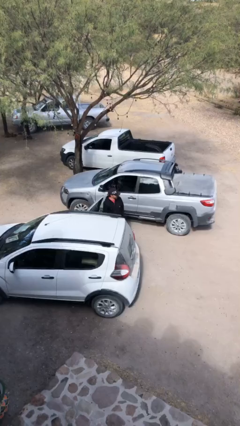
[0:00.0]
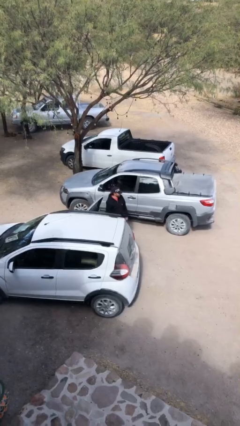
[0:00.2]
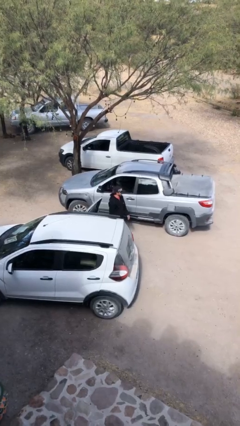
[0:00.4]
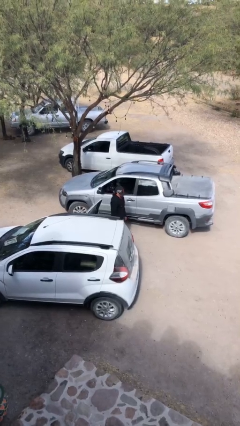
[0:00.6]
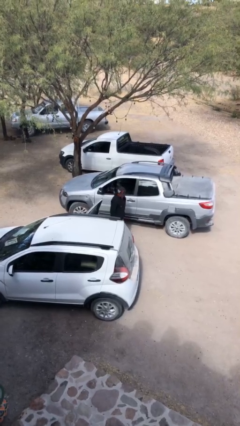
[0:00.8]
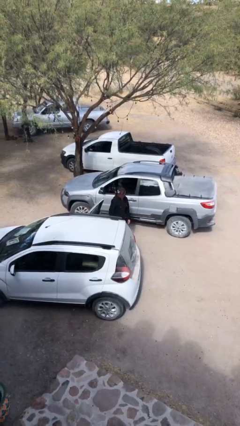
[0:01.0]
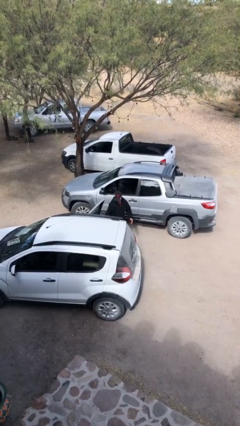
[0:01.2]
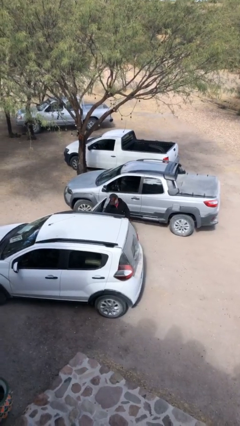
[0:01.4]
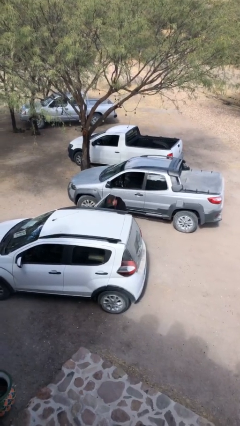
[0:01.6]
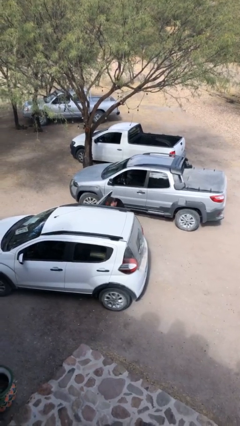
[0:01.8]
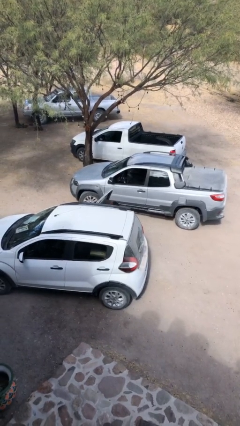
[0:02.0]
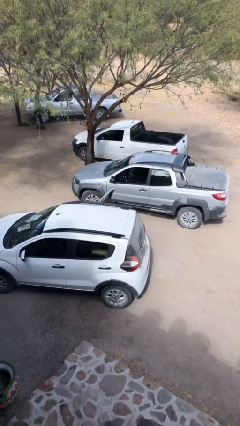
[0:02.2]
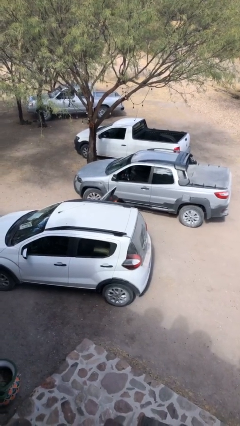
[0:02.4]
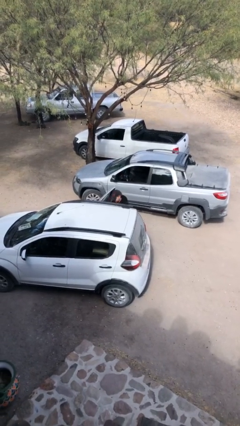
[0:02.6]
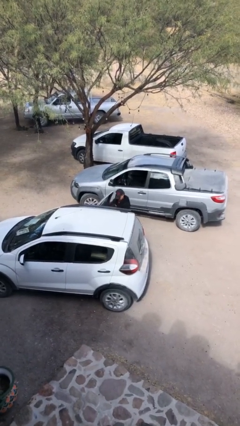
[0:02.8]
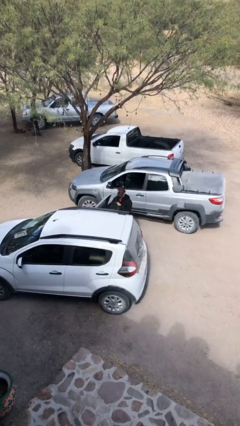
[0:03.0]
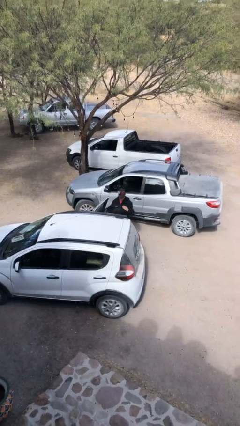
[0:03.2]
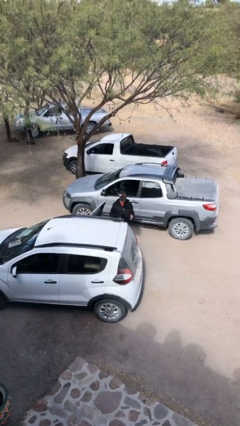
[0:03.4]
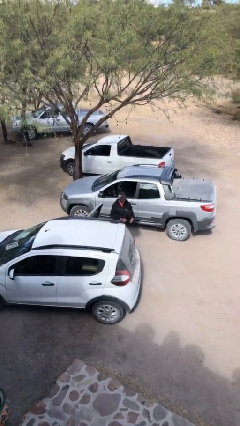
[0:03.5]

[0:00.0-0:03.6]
person unloads car

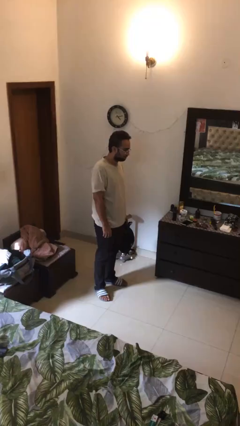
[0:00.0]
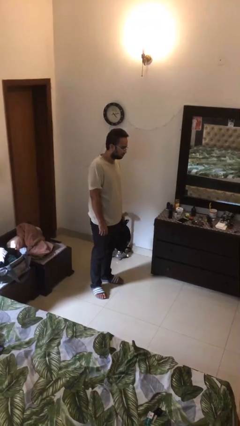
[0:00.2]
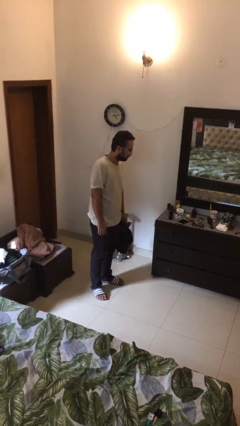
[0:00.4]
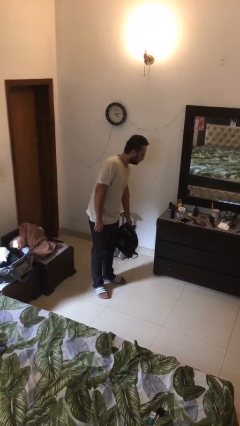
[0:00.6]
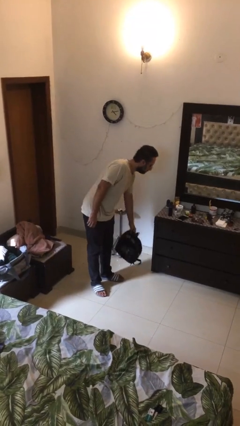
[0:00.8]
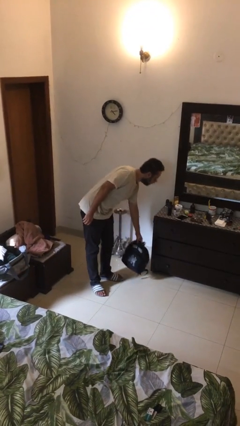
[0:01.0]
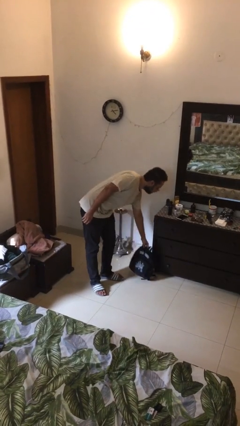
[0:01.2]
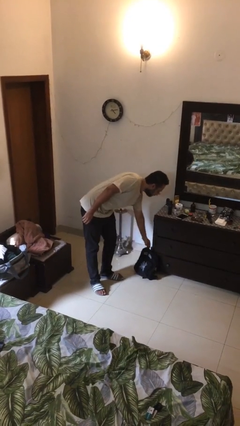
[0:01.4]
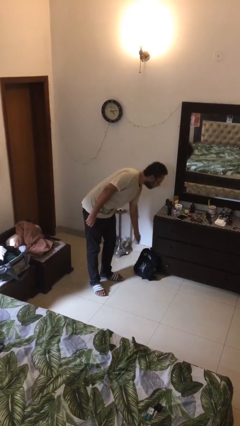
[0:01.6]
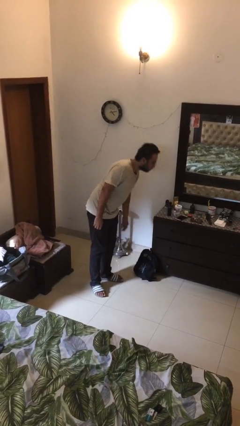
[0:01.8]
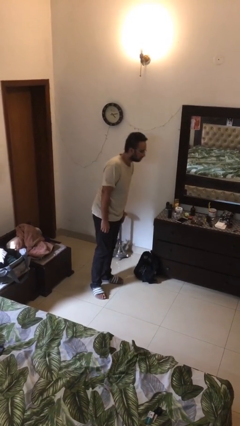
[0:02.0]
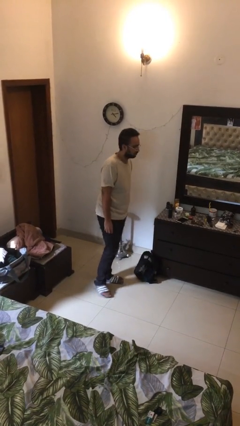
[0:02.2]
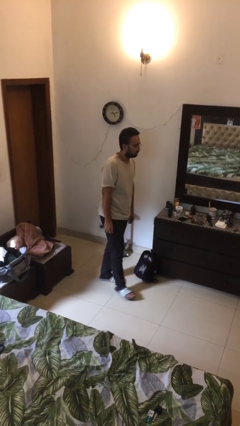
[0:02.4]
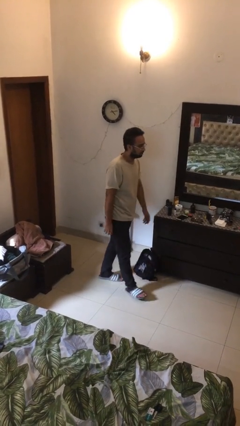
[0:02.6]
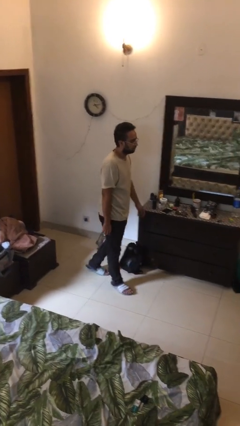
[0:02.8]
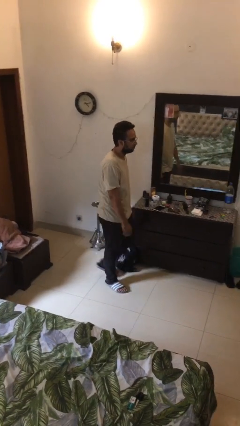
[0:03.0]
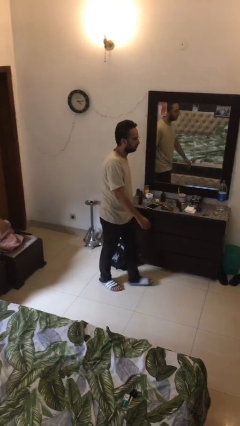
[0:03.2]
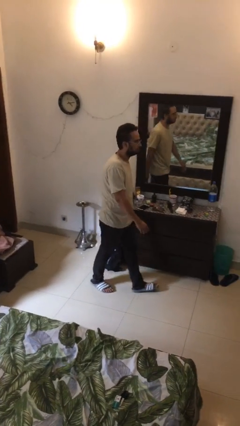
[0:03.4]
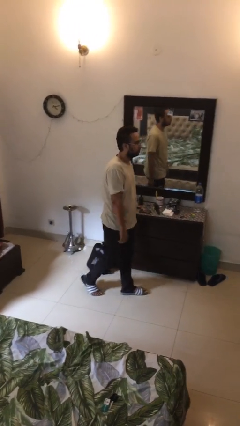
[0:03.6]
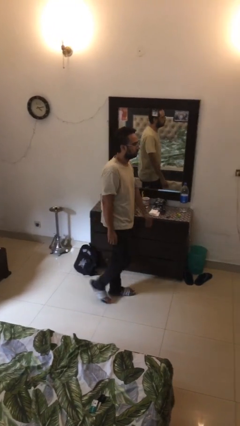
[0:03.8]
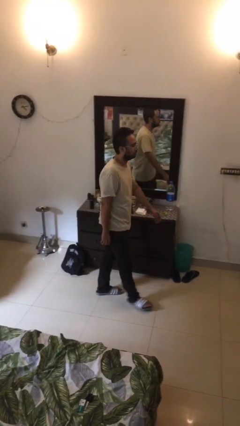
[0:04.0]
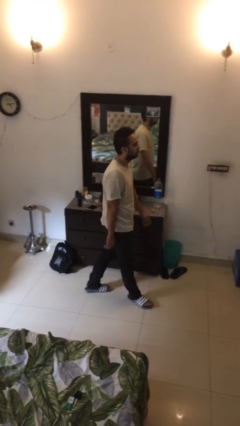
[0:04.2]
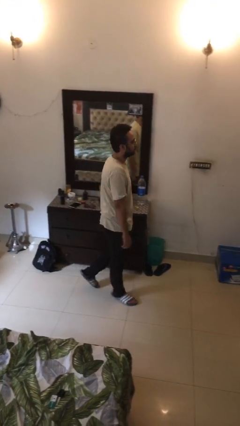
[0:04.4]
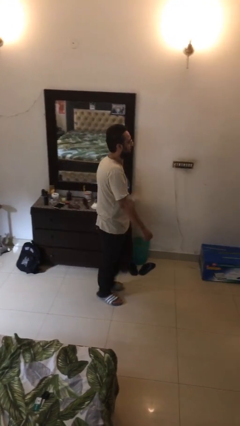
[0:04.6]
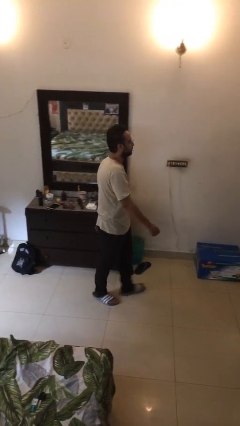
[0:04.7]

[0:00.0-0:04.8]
person puts down object on floor

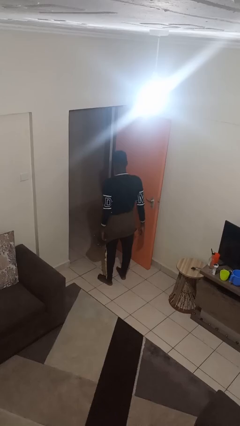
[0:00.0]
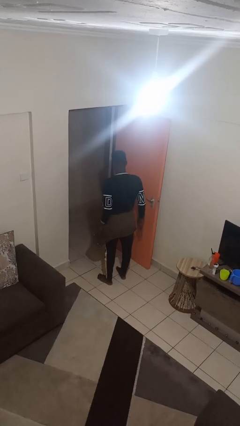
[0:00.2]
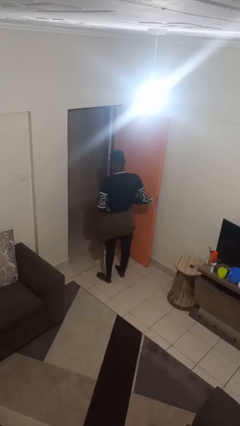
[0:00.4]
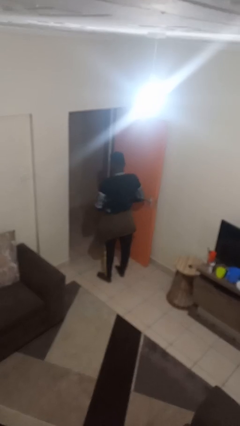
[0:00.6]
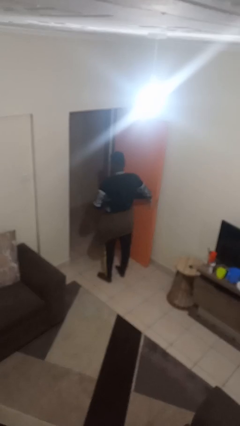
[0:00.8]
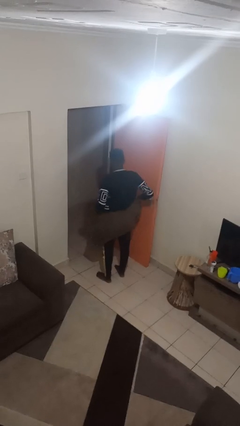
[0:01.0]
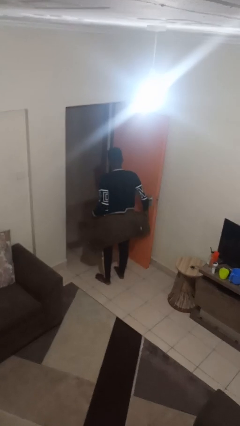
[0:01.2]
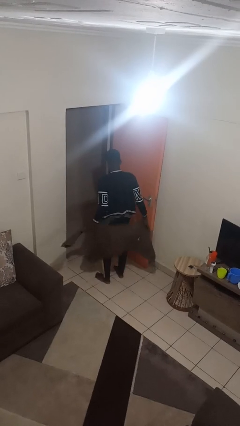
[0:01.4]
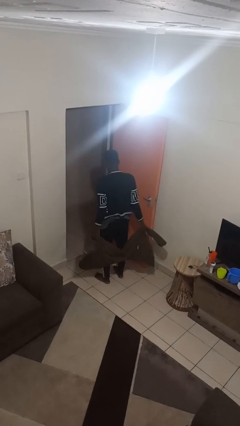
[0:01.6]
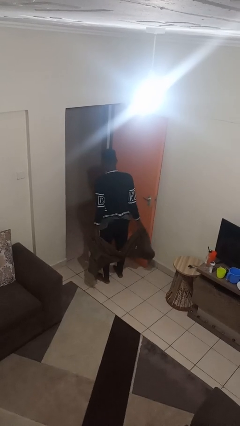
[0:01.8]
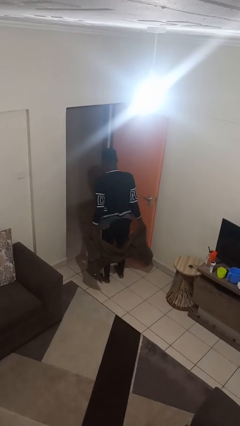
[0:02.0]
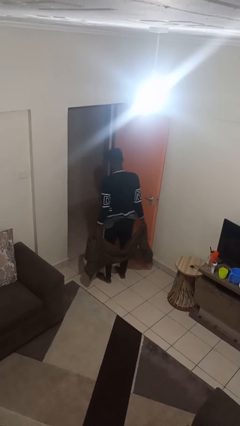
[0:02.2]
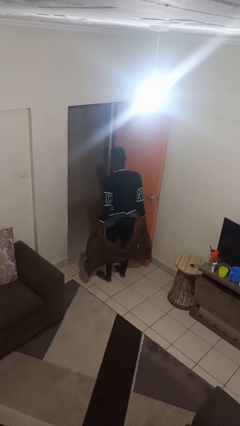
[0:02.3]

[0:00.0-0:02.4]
person unties jacket around waist

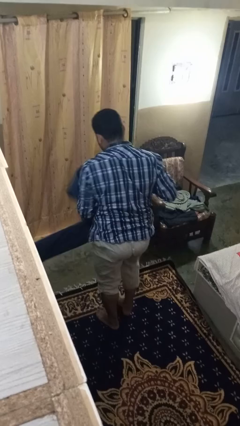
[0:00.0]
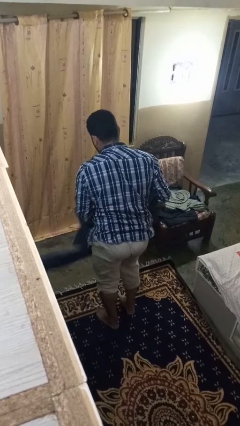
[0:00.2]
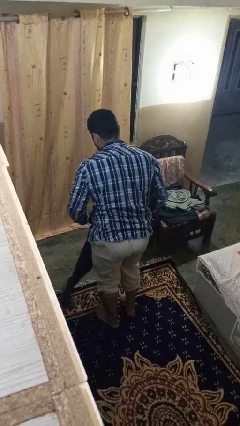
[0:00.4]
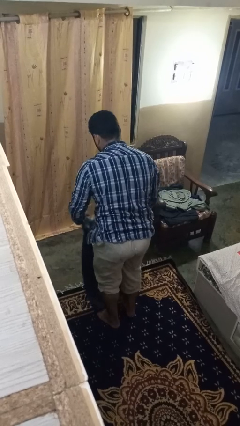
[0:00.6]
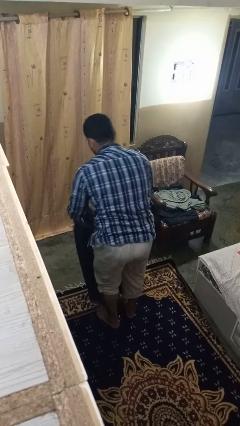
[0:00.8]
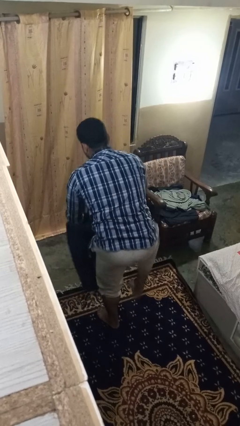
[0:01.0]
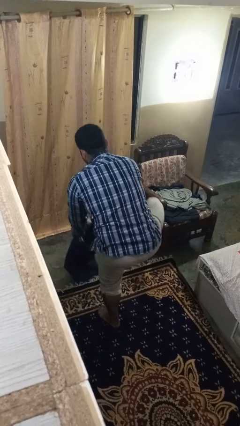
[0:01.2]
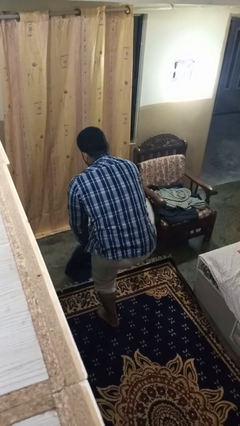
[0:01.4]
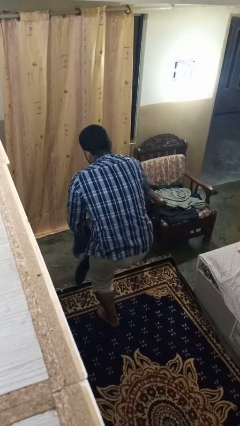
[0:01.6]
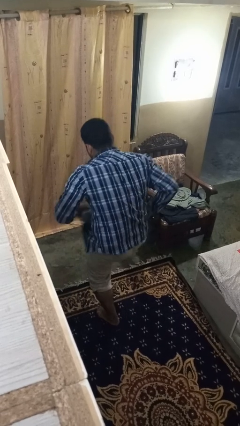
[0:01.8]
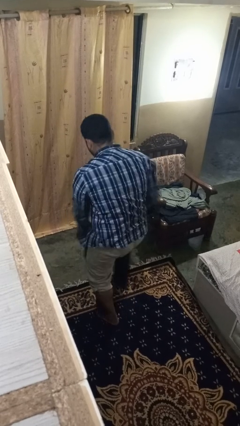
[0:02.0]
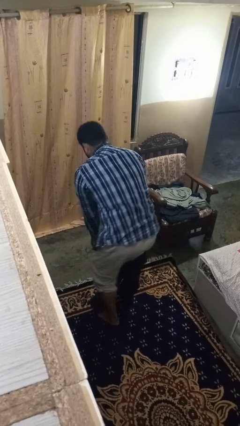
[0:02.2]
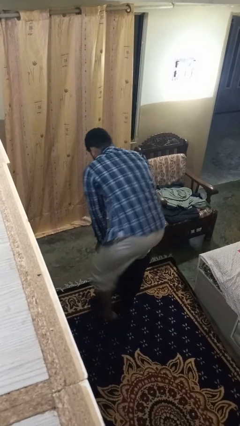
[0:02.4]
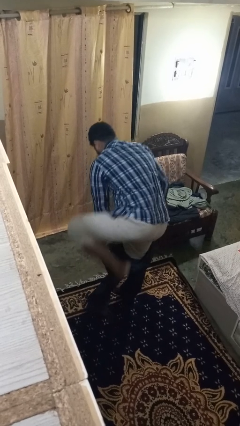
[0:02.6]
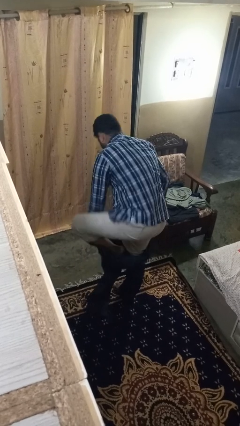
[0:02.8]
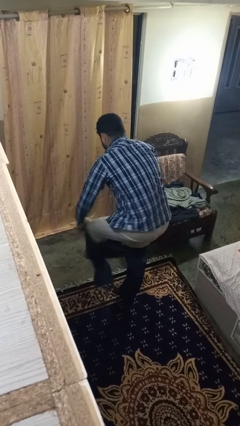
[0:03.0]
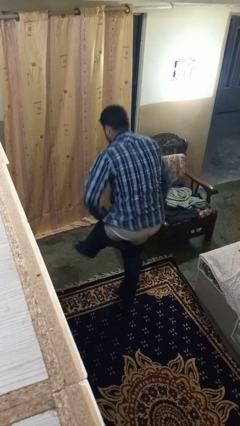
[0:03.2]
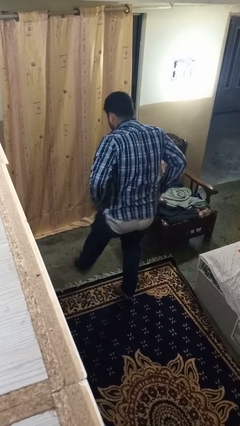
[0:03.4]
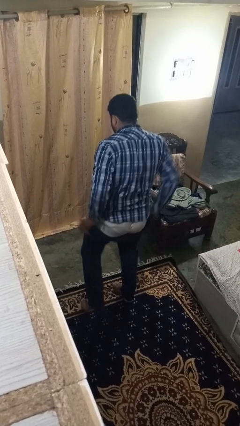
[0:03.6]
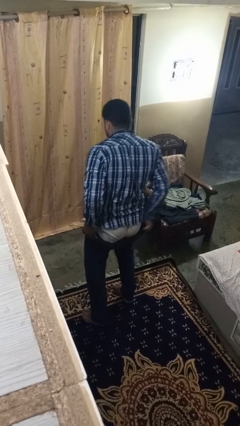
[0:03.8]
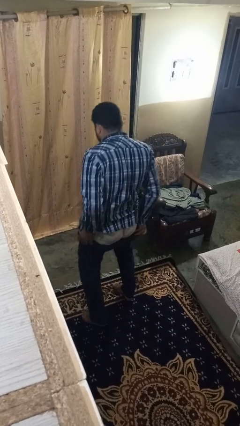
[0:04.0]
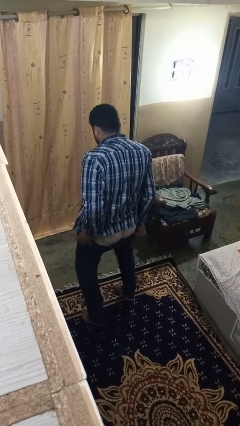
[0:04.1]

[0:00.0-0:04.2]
person puts on pants

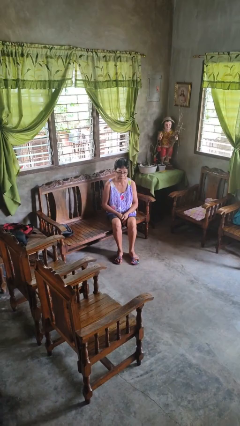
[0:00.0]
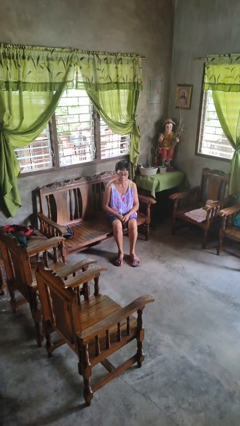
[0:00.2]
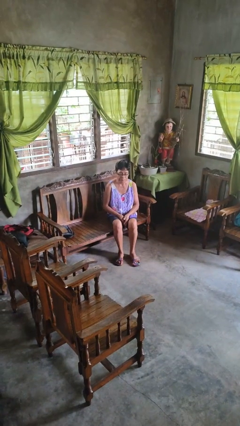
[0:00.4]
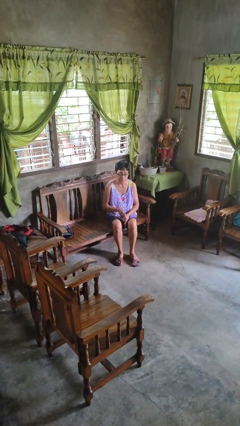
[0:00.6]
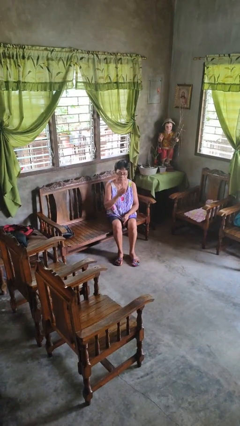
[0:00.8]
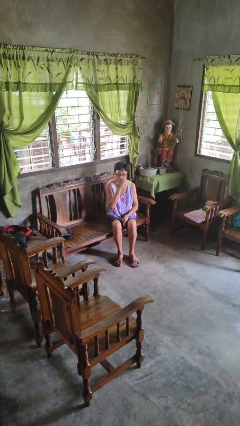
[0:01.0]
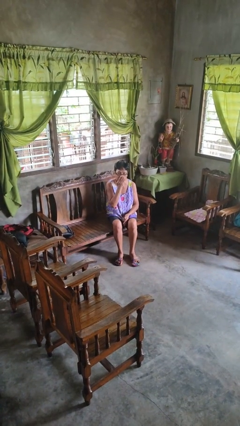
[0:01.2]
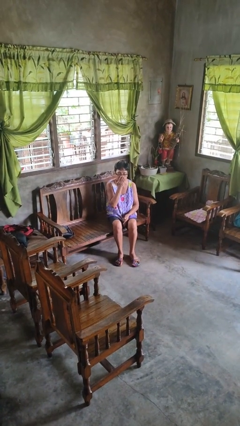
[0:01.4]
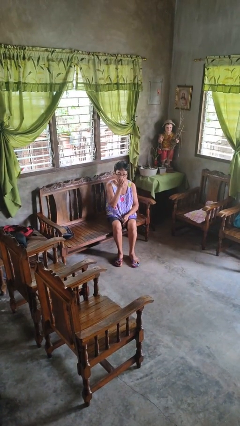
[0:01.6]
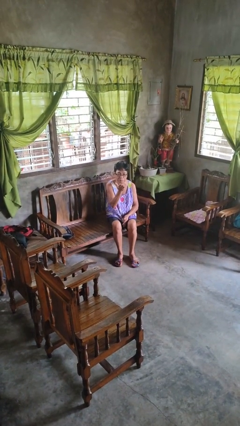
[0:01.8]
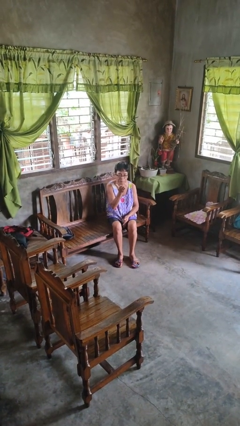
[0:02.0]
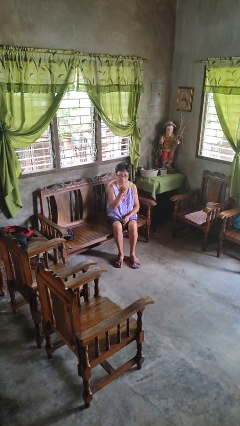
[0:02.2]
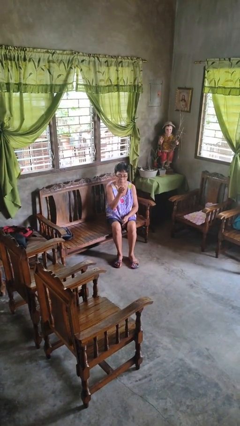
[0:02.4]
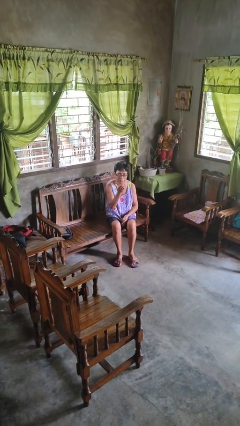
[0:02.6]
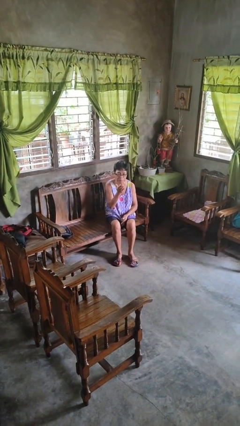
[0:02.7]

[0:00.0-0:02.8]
person gestures blow kiss
